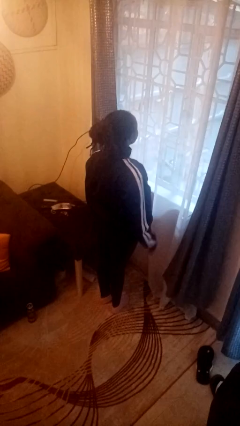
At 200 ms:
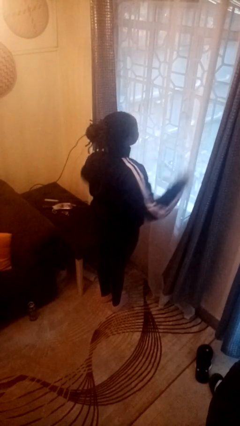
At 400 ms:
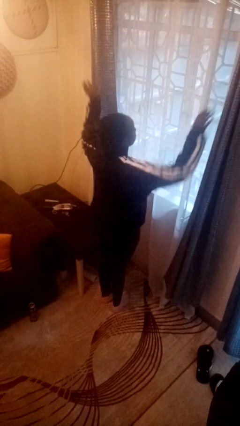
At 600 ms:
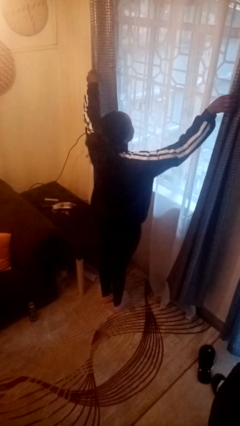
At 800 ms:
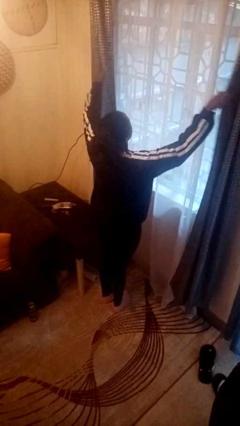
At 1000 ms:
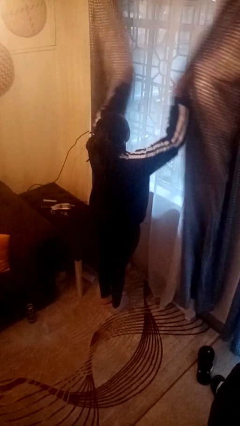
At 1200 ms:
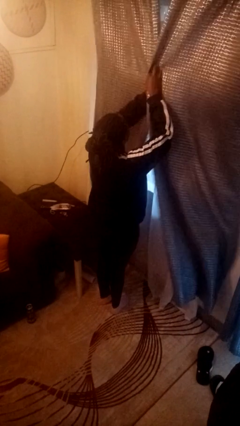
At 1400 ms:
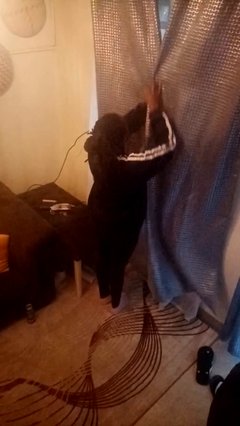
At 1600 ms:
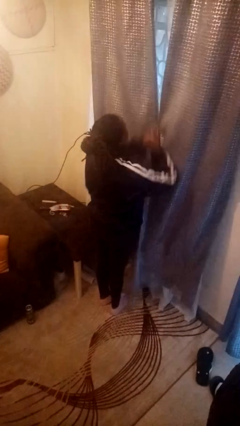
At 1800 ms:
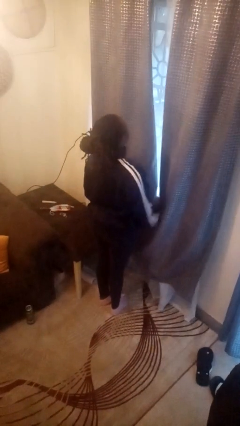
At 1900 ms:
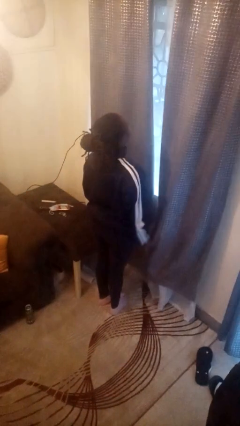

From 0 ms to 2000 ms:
person closes curtains

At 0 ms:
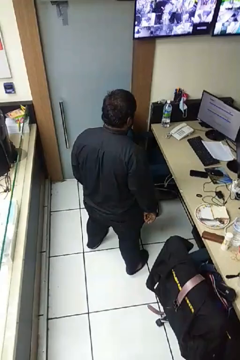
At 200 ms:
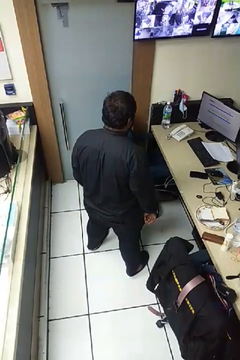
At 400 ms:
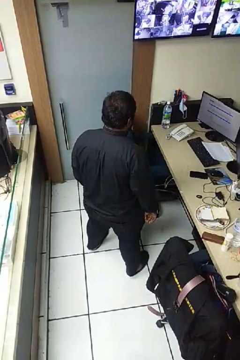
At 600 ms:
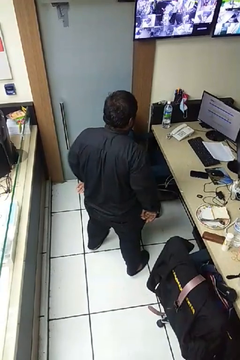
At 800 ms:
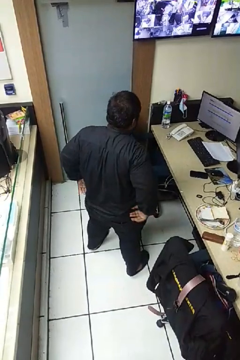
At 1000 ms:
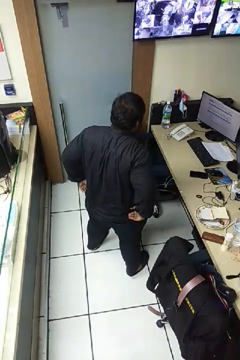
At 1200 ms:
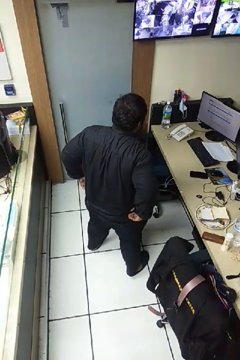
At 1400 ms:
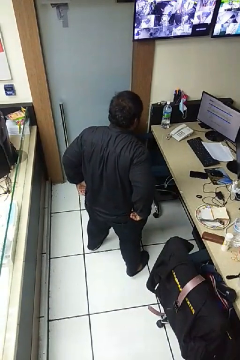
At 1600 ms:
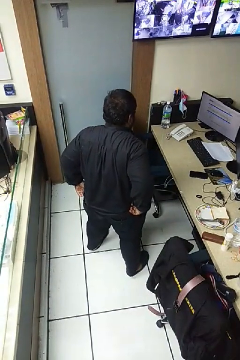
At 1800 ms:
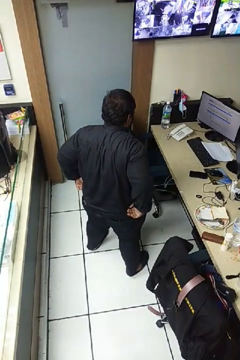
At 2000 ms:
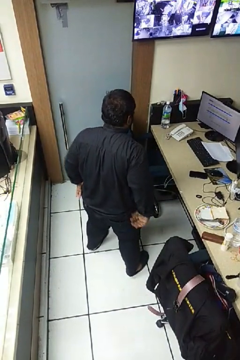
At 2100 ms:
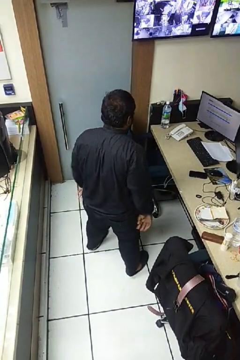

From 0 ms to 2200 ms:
person hikes up pants

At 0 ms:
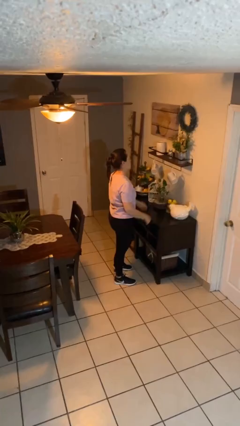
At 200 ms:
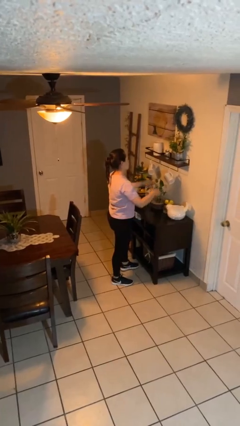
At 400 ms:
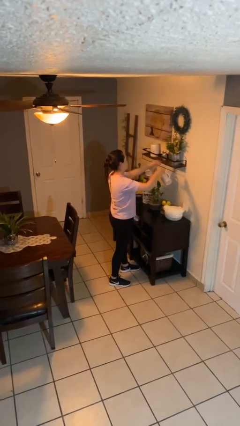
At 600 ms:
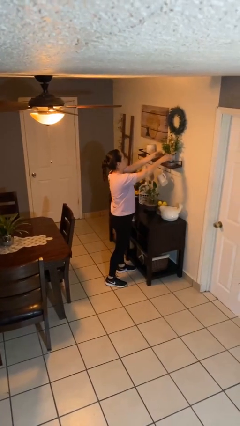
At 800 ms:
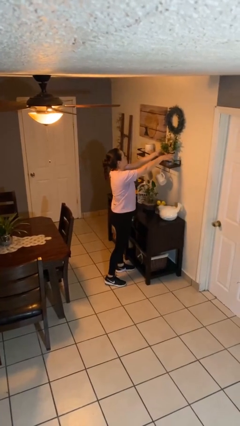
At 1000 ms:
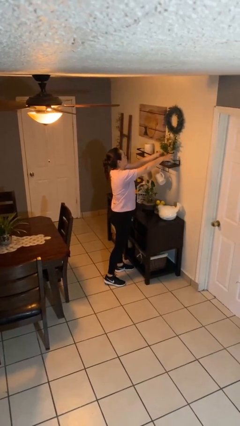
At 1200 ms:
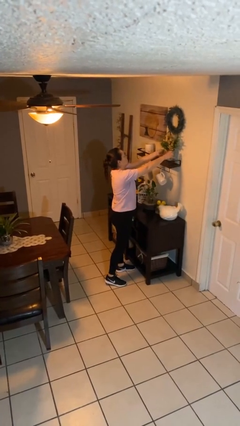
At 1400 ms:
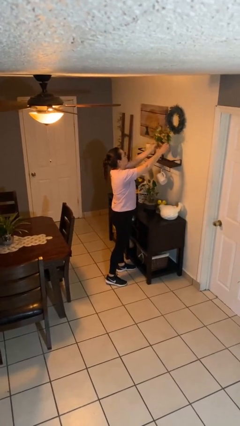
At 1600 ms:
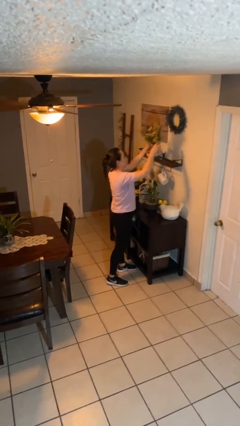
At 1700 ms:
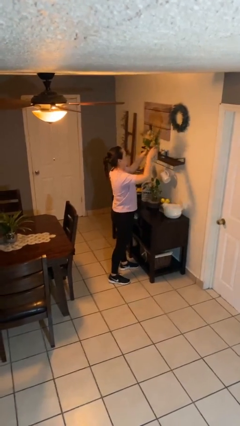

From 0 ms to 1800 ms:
person picks up object from countertop

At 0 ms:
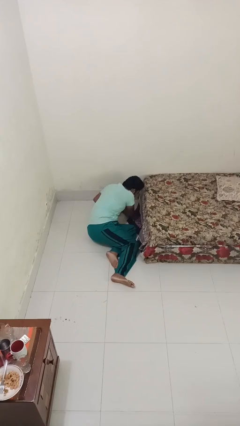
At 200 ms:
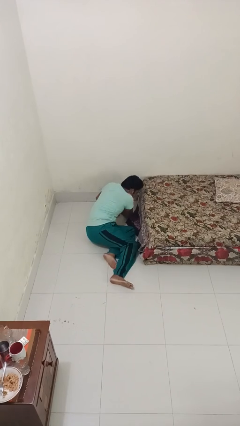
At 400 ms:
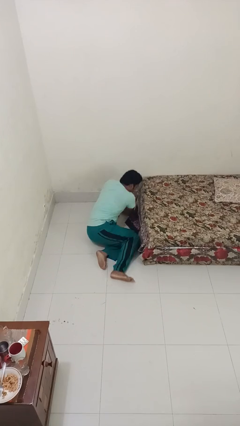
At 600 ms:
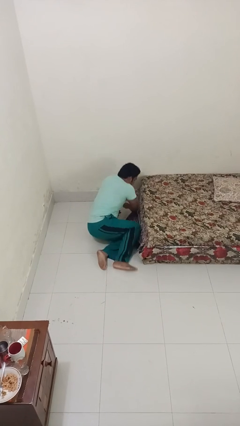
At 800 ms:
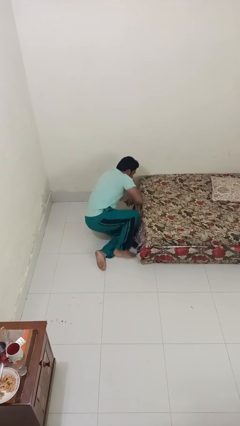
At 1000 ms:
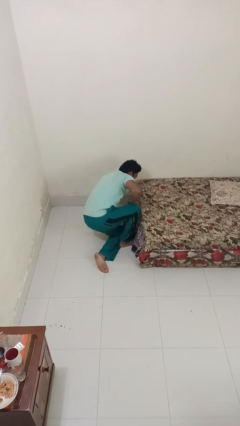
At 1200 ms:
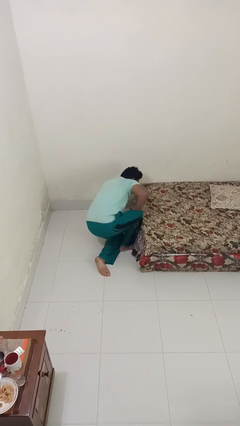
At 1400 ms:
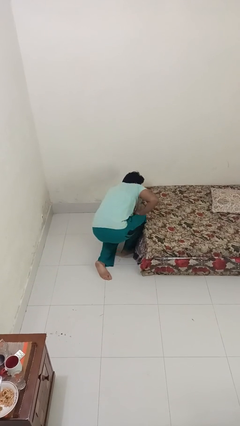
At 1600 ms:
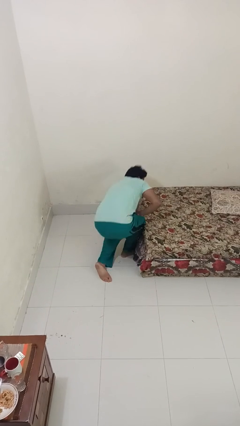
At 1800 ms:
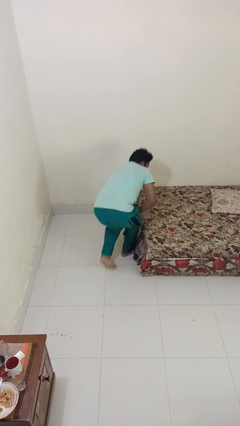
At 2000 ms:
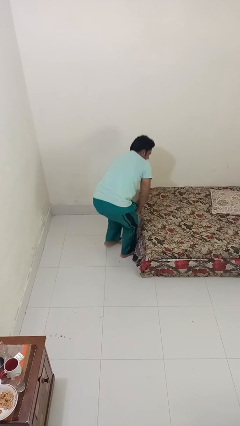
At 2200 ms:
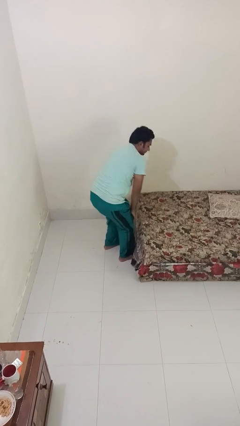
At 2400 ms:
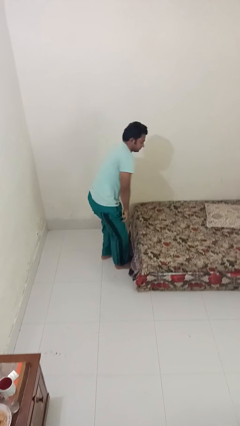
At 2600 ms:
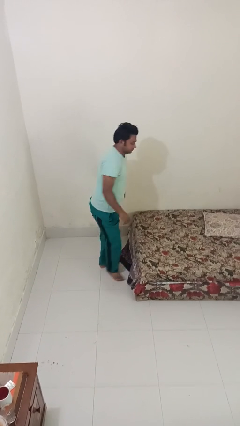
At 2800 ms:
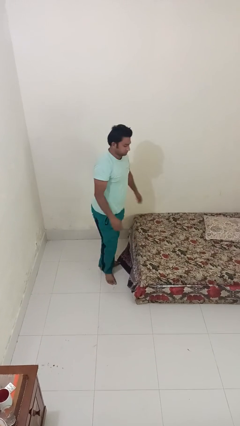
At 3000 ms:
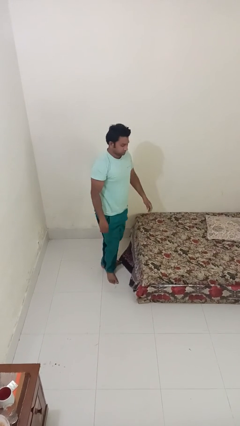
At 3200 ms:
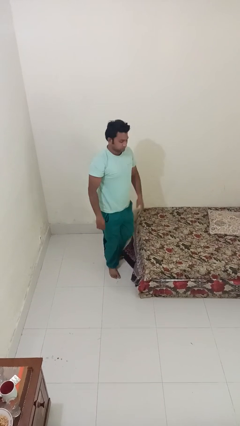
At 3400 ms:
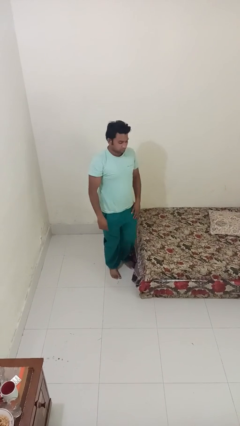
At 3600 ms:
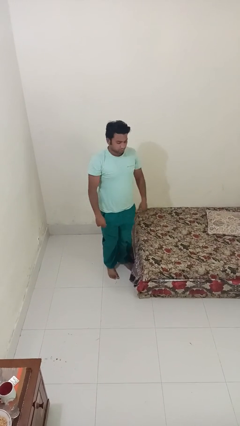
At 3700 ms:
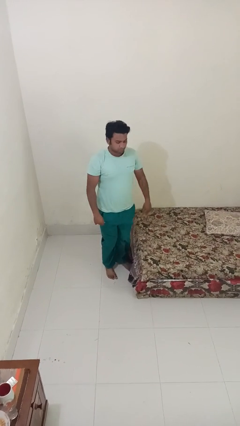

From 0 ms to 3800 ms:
person stands up from floor

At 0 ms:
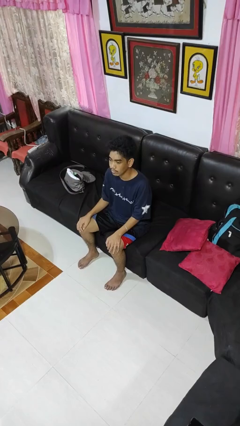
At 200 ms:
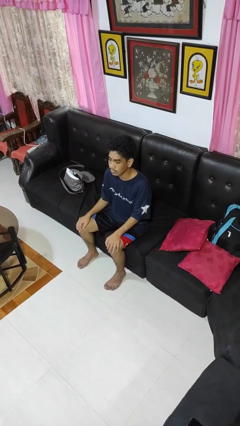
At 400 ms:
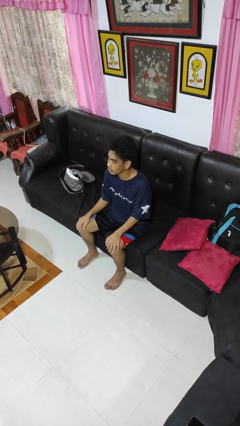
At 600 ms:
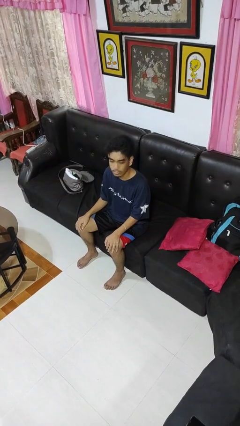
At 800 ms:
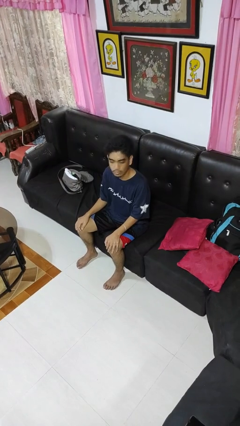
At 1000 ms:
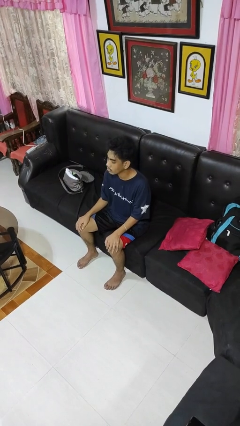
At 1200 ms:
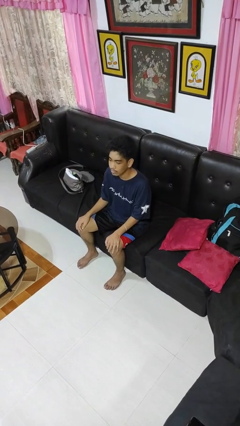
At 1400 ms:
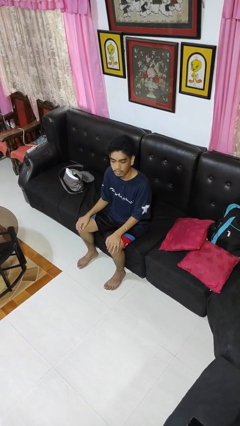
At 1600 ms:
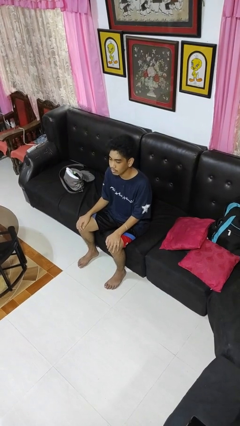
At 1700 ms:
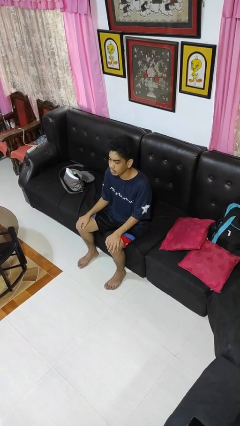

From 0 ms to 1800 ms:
person shakes head

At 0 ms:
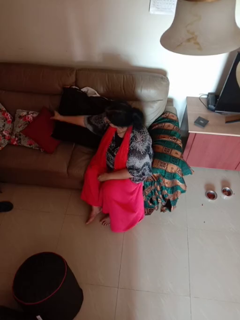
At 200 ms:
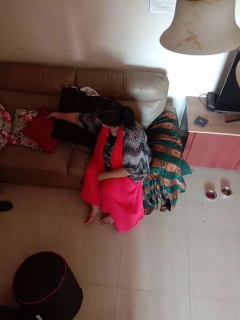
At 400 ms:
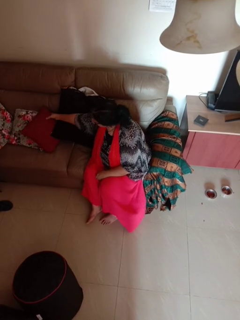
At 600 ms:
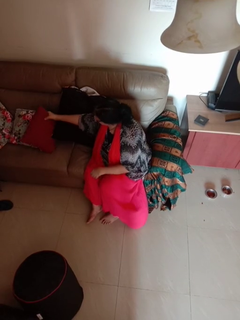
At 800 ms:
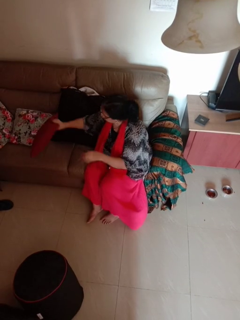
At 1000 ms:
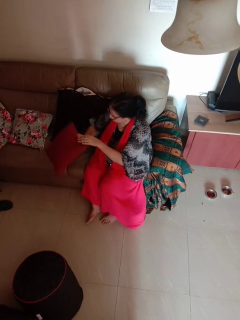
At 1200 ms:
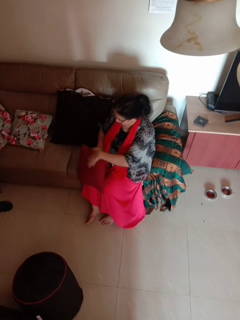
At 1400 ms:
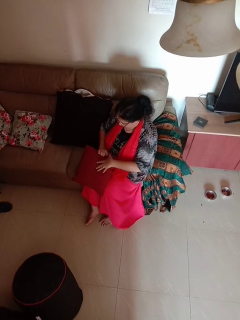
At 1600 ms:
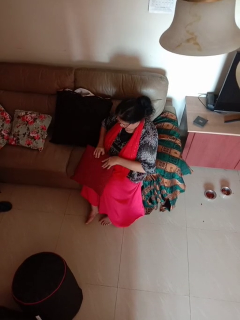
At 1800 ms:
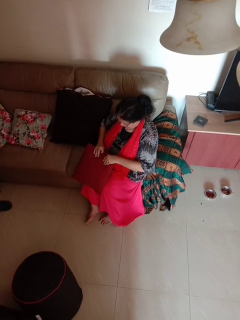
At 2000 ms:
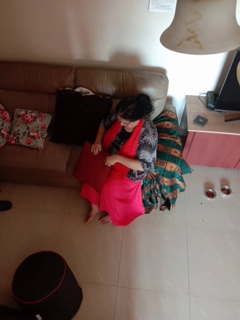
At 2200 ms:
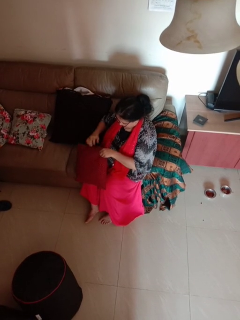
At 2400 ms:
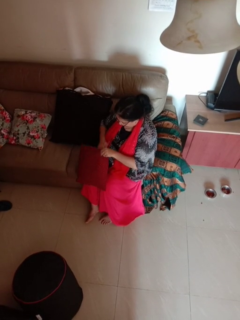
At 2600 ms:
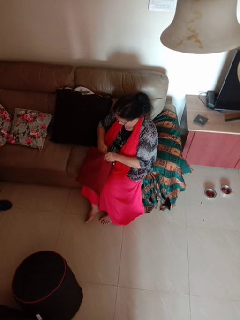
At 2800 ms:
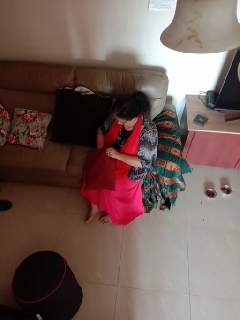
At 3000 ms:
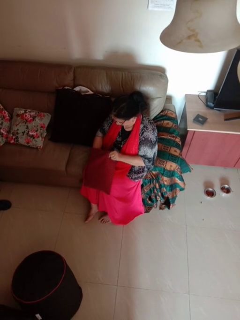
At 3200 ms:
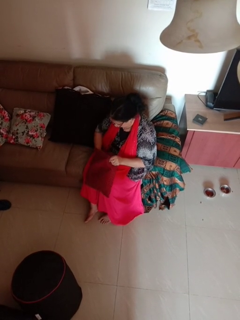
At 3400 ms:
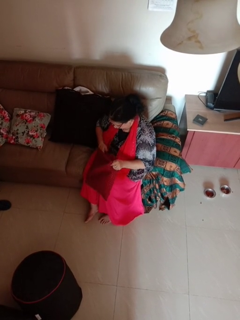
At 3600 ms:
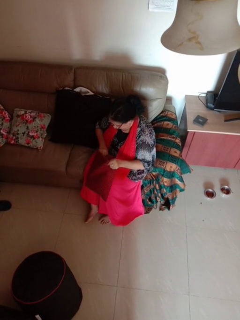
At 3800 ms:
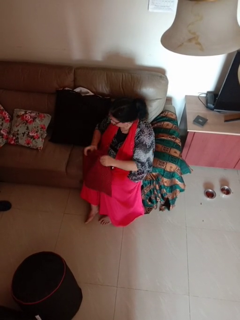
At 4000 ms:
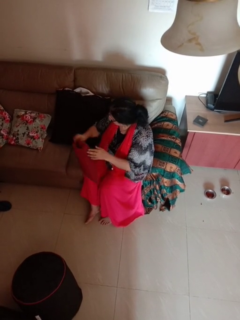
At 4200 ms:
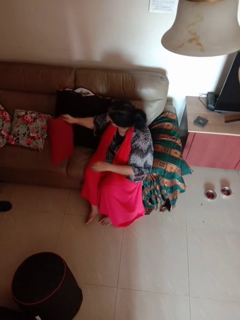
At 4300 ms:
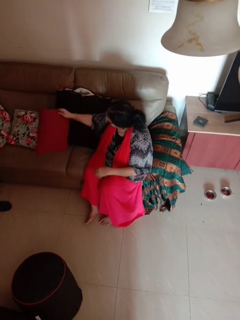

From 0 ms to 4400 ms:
person searches in couch

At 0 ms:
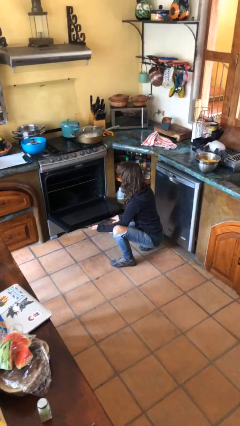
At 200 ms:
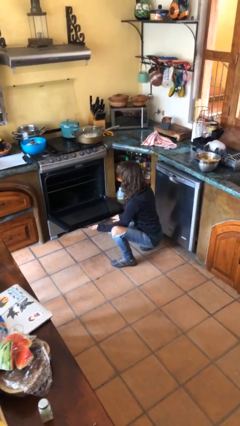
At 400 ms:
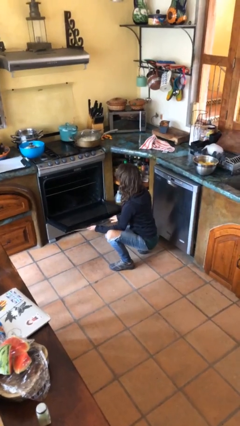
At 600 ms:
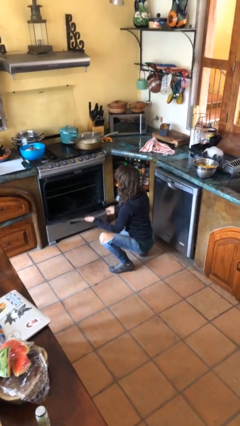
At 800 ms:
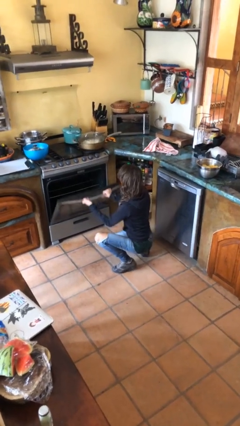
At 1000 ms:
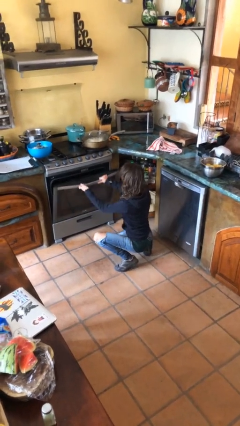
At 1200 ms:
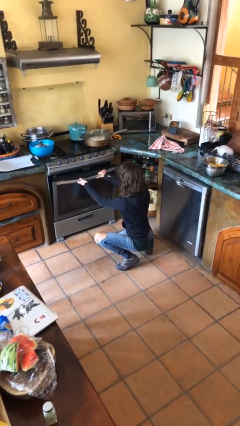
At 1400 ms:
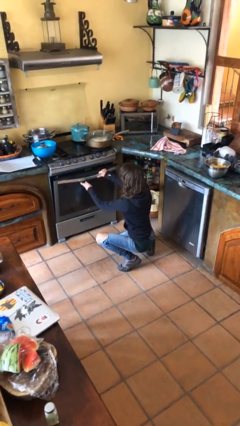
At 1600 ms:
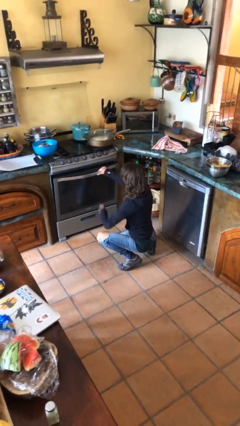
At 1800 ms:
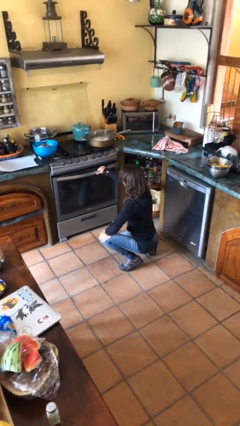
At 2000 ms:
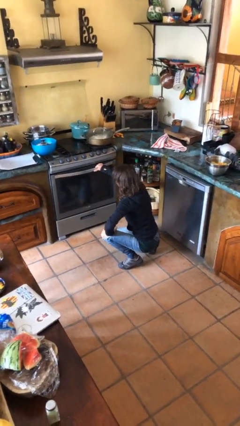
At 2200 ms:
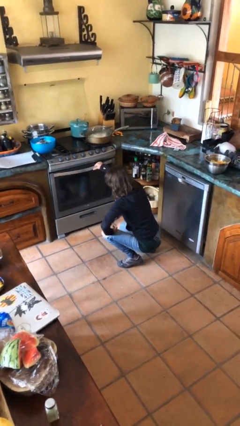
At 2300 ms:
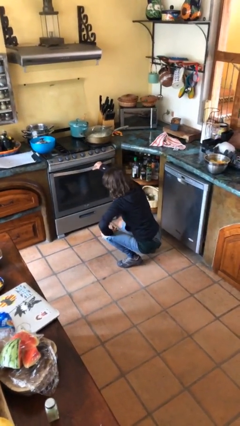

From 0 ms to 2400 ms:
person closes oven door

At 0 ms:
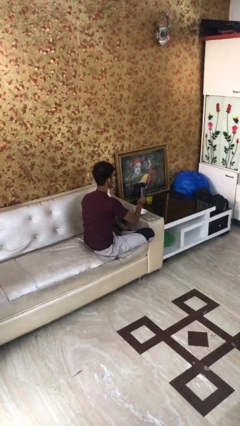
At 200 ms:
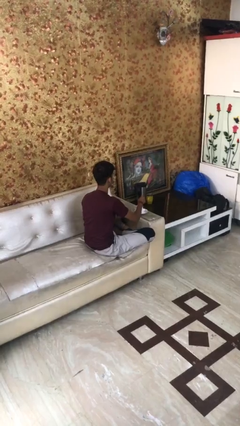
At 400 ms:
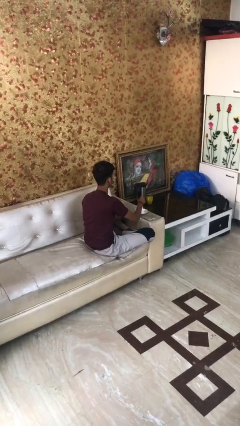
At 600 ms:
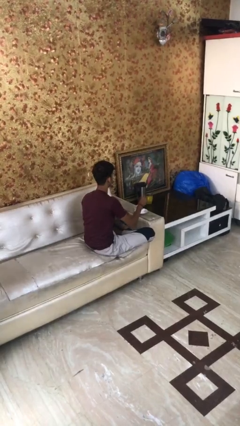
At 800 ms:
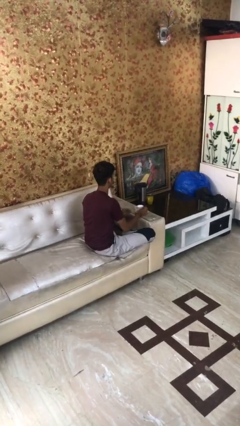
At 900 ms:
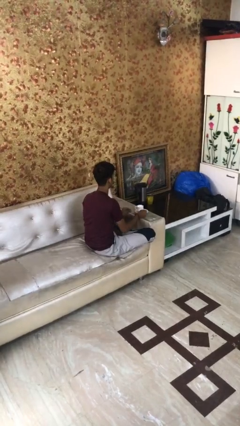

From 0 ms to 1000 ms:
person stirs mug